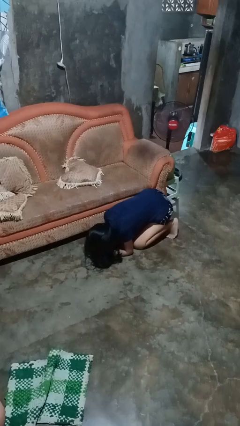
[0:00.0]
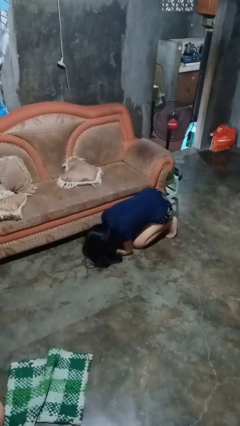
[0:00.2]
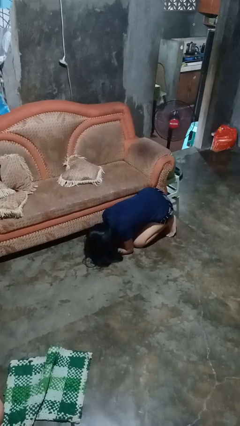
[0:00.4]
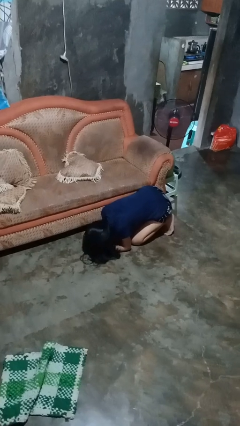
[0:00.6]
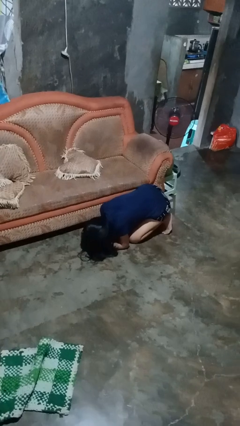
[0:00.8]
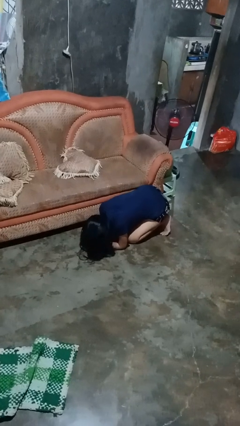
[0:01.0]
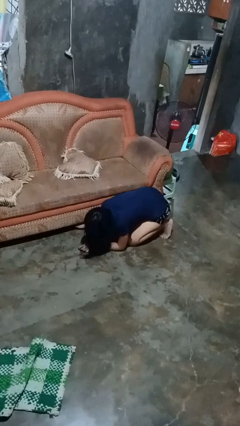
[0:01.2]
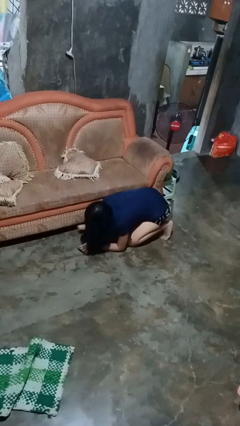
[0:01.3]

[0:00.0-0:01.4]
person searches under couch

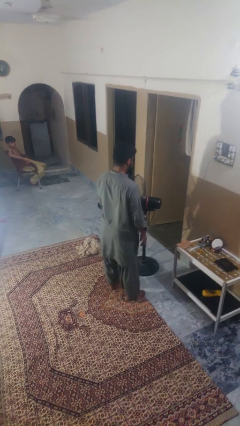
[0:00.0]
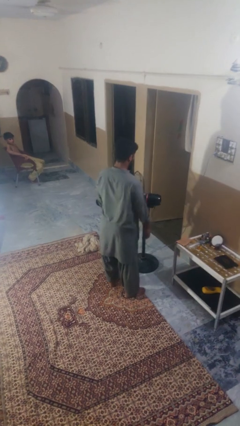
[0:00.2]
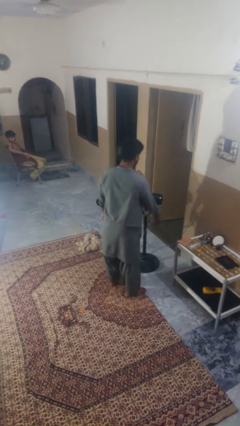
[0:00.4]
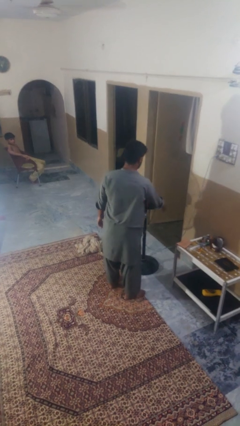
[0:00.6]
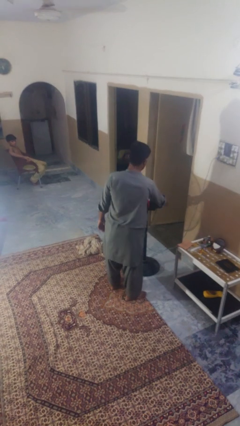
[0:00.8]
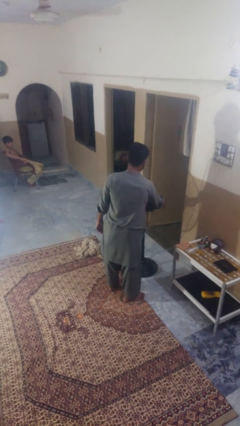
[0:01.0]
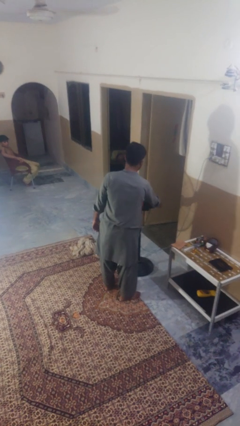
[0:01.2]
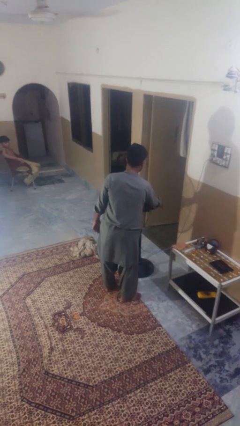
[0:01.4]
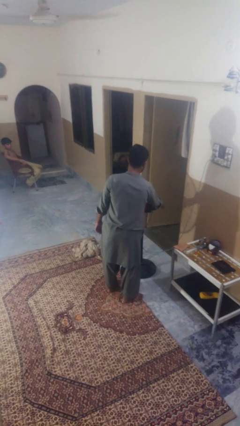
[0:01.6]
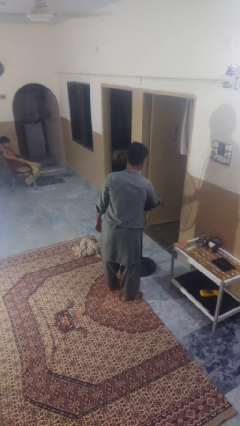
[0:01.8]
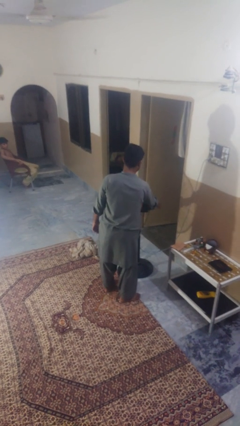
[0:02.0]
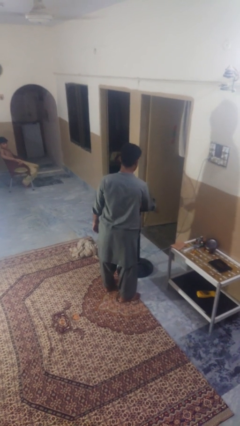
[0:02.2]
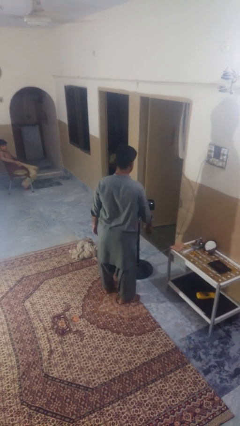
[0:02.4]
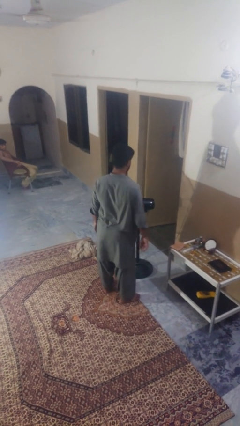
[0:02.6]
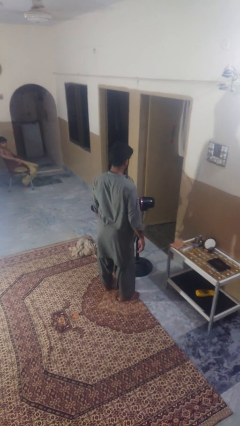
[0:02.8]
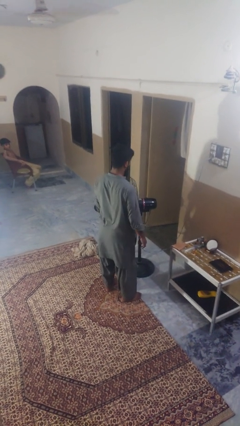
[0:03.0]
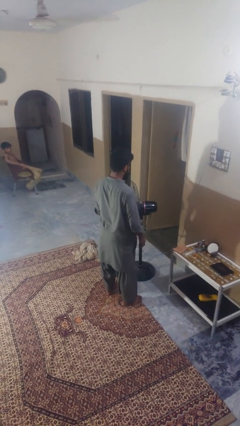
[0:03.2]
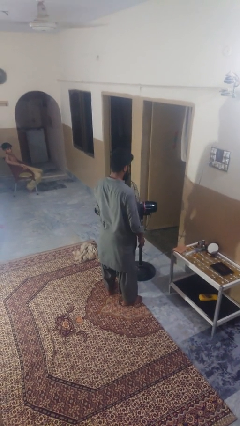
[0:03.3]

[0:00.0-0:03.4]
person turns on fan

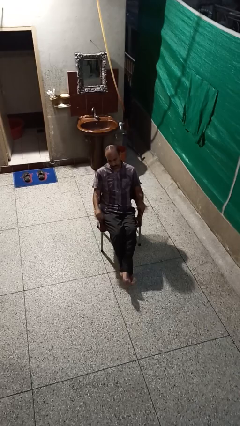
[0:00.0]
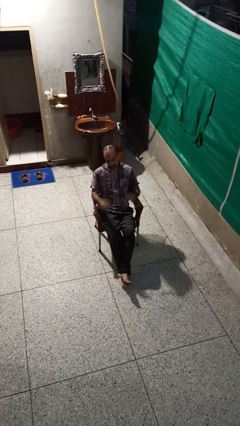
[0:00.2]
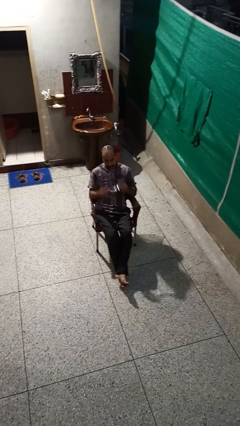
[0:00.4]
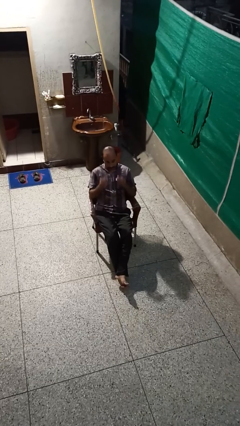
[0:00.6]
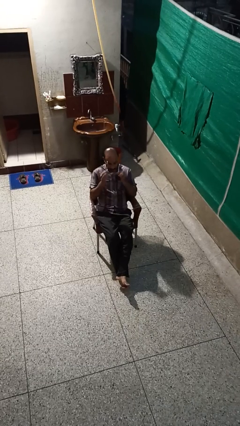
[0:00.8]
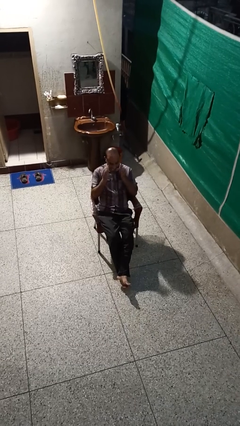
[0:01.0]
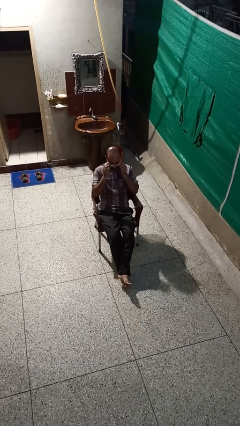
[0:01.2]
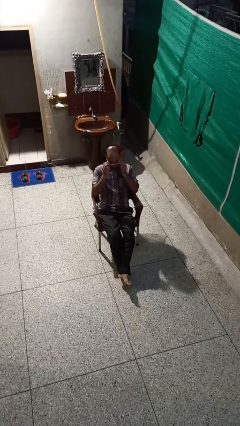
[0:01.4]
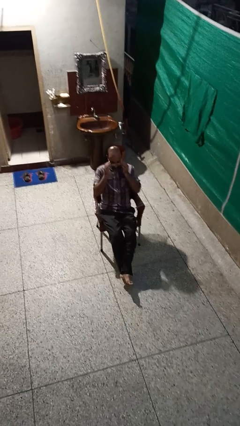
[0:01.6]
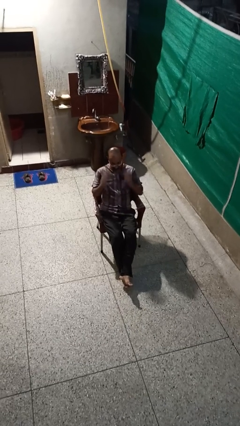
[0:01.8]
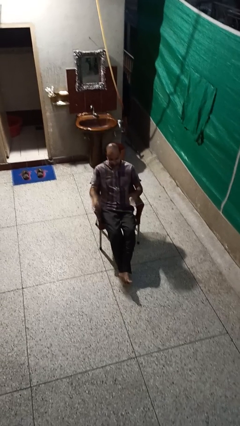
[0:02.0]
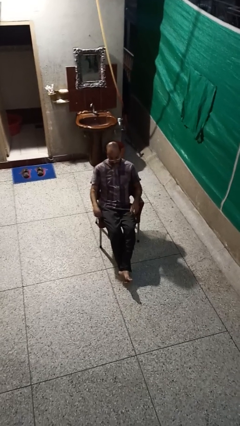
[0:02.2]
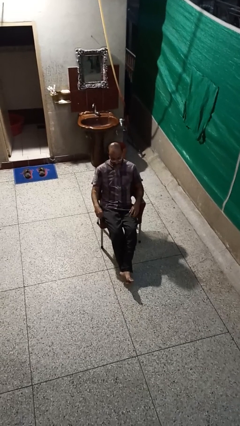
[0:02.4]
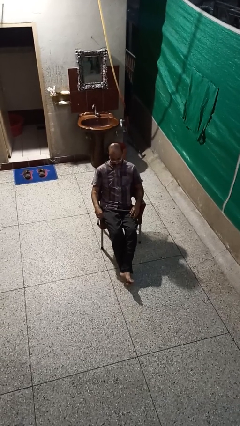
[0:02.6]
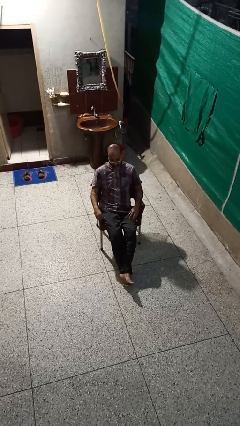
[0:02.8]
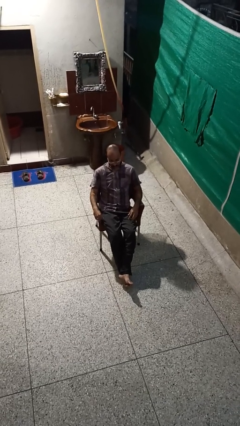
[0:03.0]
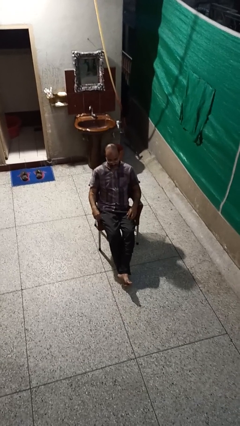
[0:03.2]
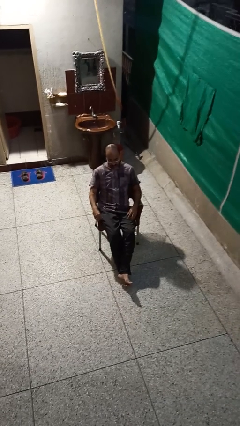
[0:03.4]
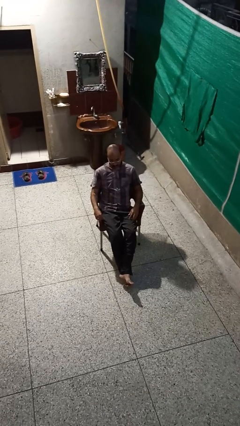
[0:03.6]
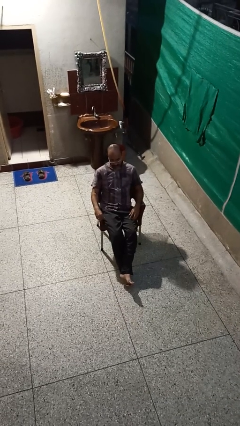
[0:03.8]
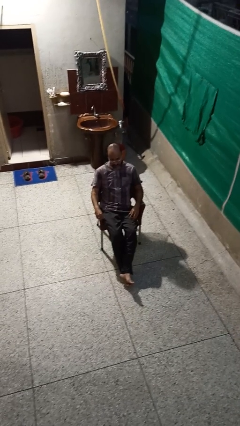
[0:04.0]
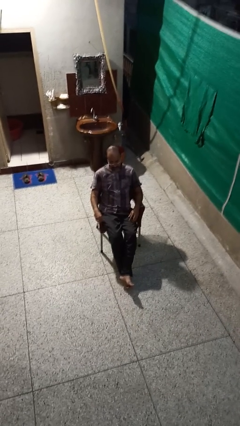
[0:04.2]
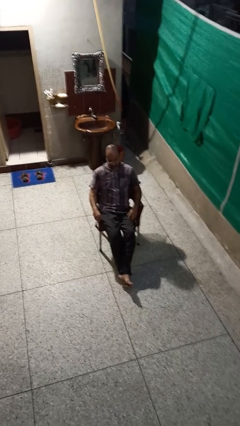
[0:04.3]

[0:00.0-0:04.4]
person puts on glasses

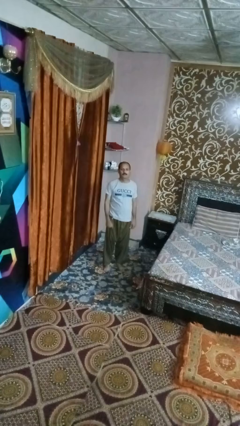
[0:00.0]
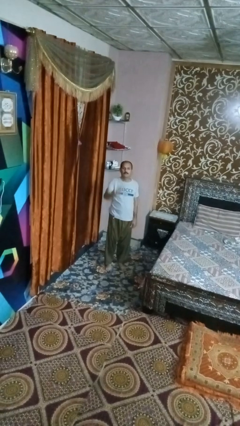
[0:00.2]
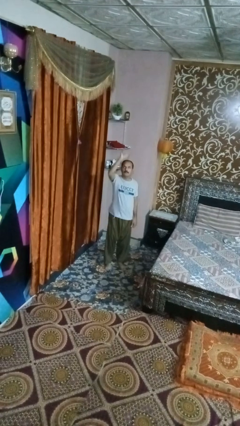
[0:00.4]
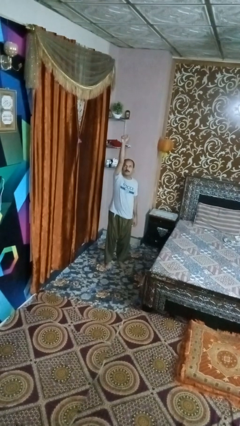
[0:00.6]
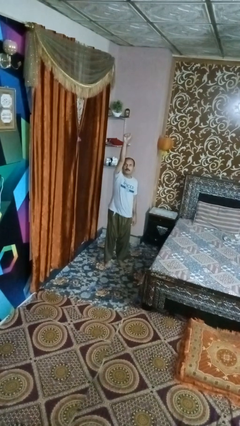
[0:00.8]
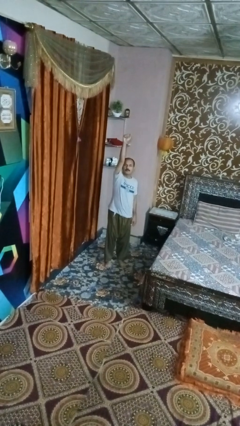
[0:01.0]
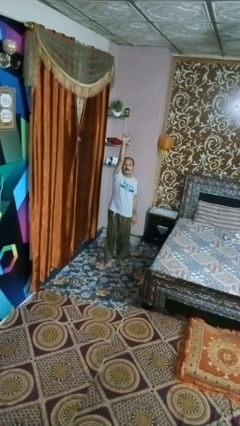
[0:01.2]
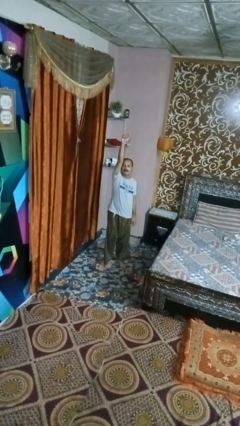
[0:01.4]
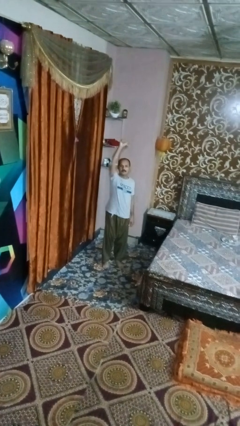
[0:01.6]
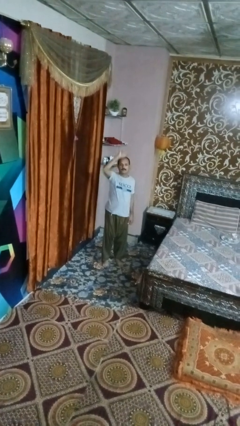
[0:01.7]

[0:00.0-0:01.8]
person punches

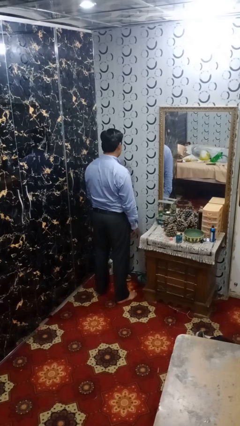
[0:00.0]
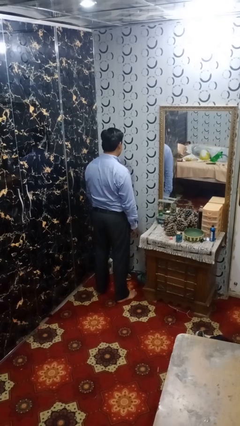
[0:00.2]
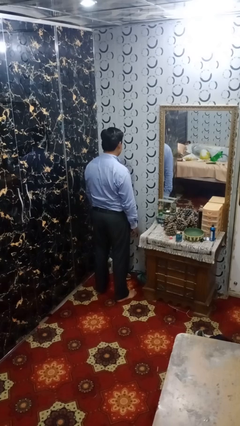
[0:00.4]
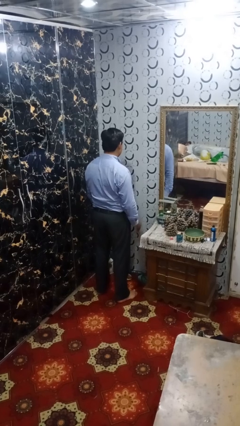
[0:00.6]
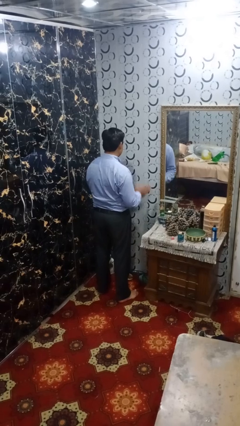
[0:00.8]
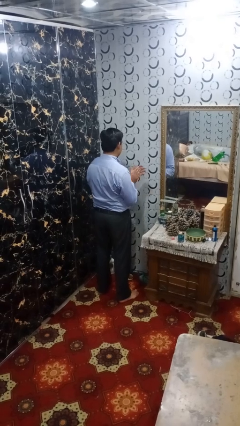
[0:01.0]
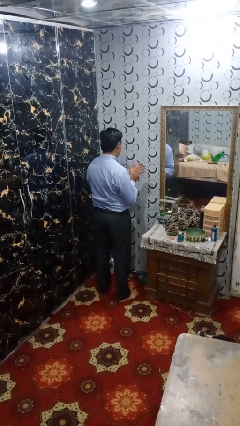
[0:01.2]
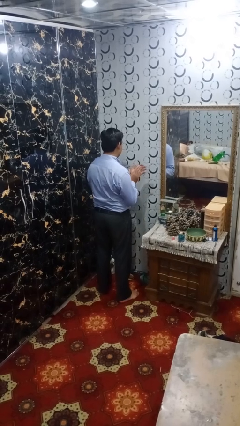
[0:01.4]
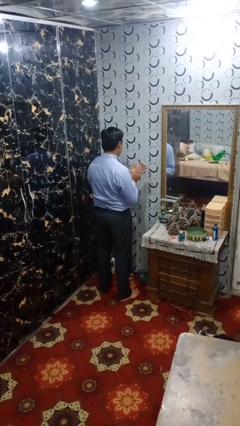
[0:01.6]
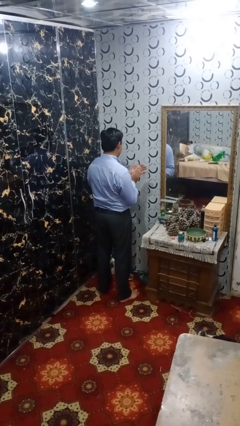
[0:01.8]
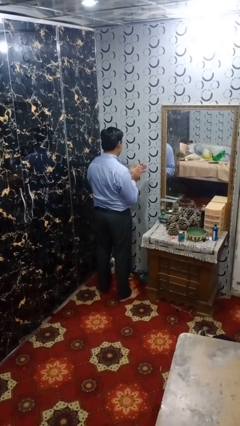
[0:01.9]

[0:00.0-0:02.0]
person claps hands

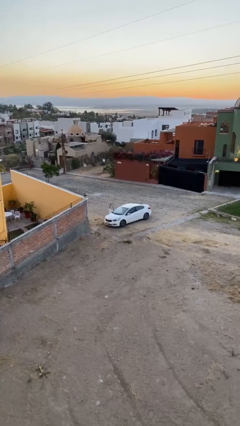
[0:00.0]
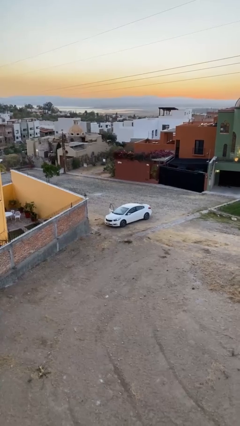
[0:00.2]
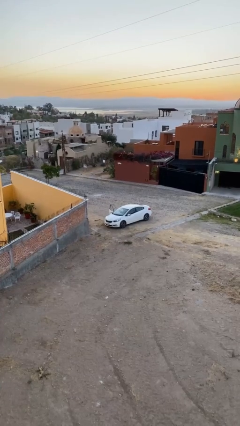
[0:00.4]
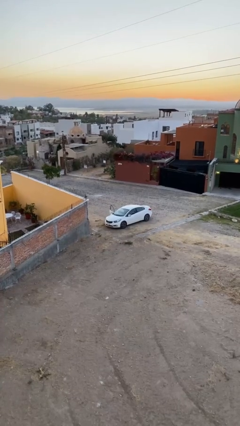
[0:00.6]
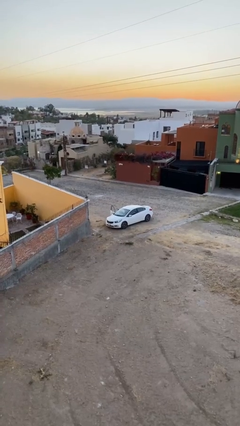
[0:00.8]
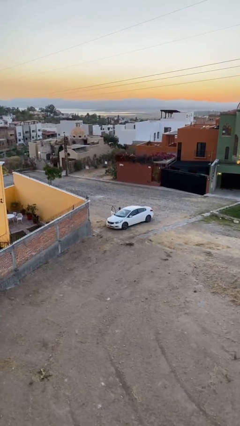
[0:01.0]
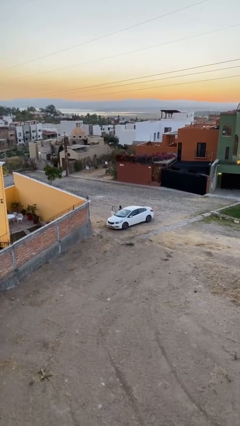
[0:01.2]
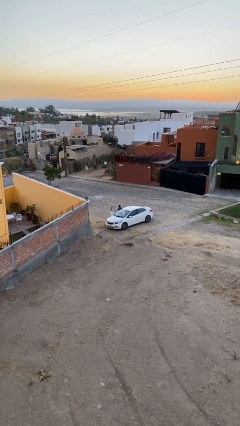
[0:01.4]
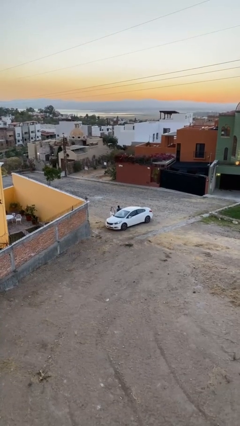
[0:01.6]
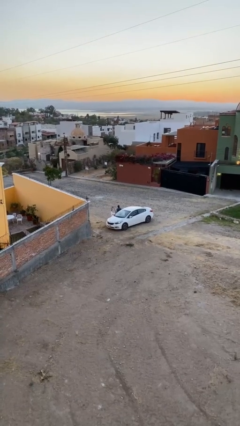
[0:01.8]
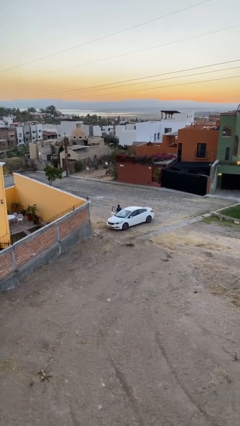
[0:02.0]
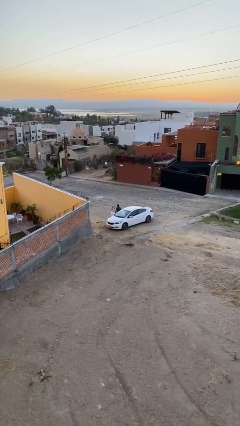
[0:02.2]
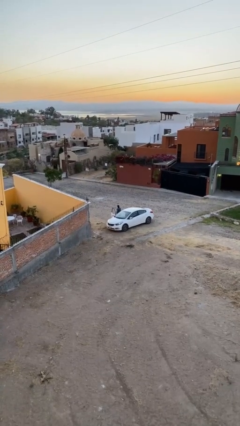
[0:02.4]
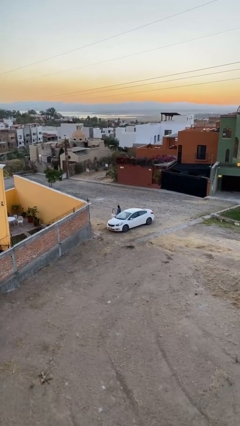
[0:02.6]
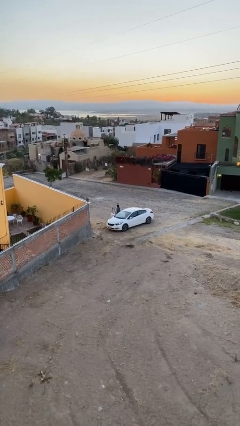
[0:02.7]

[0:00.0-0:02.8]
person exits car

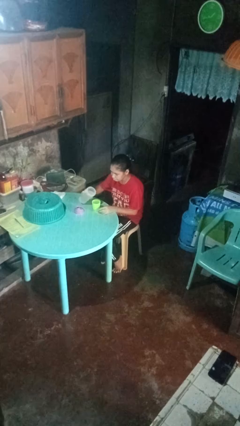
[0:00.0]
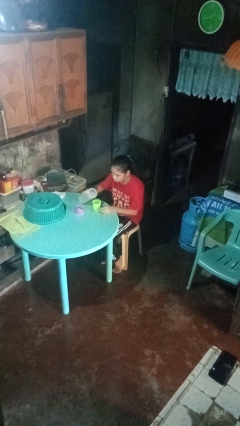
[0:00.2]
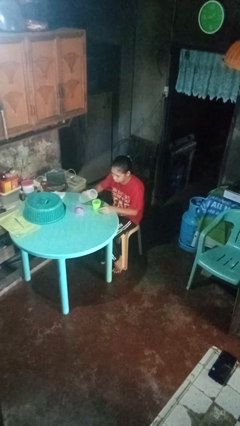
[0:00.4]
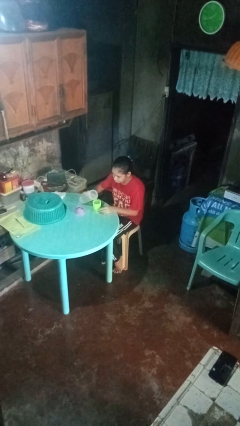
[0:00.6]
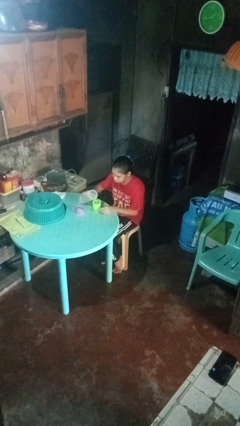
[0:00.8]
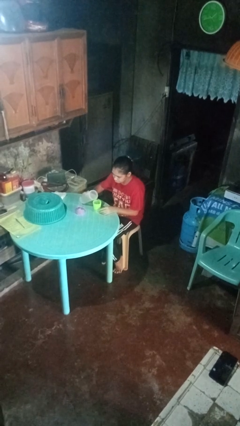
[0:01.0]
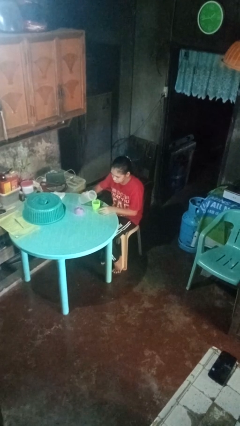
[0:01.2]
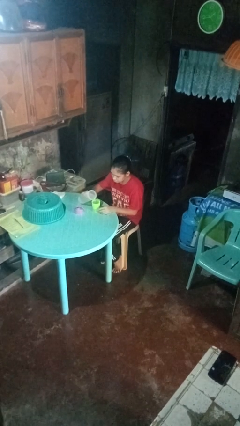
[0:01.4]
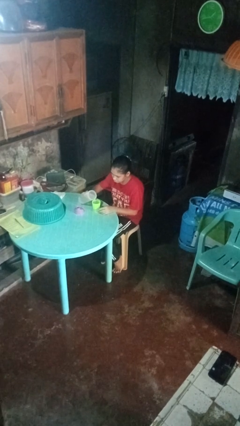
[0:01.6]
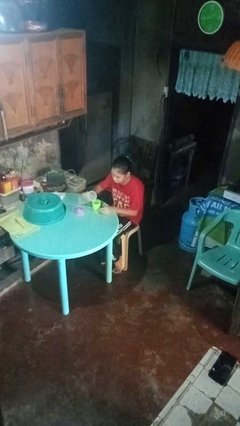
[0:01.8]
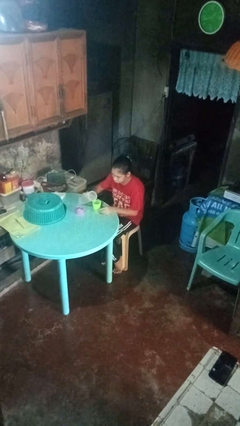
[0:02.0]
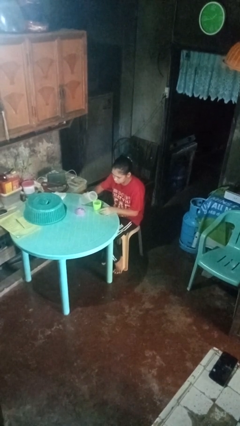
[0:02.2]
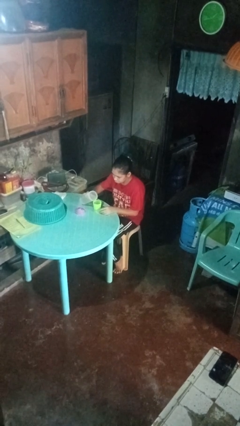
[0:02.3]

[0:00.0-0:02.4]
person pours liquid into cup
